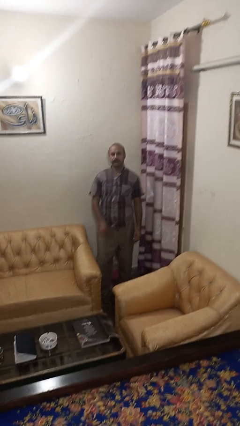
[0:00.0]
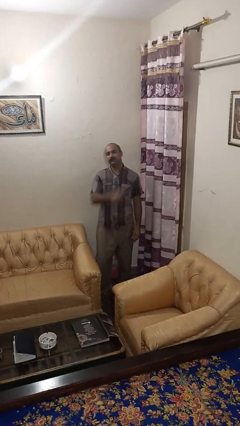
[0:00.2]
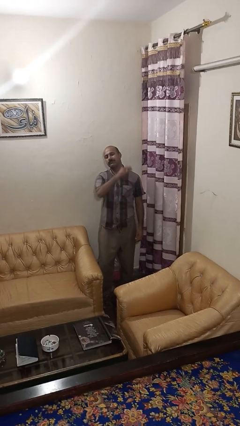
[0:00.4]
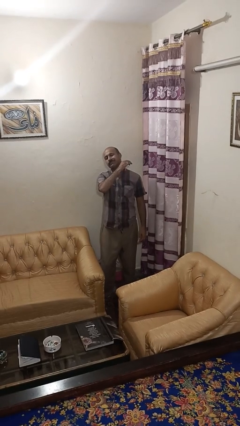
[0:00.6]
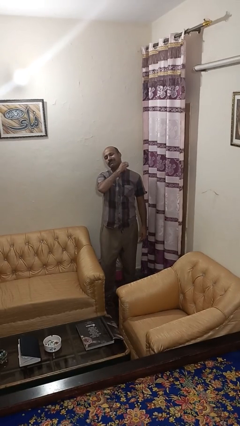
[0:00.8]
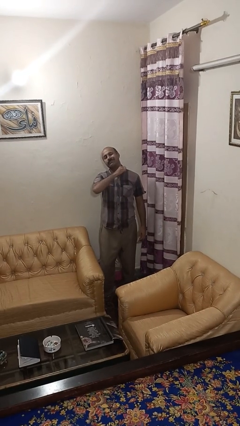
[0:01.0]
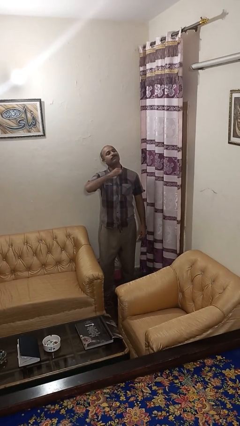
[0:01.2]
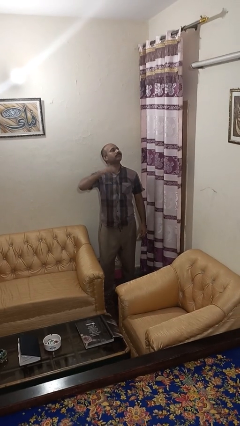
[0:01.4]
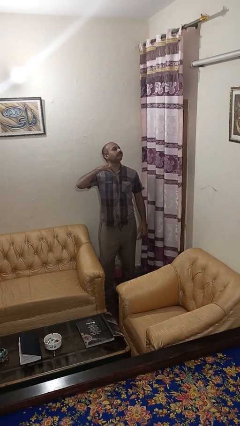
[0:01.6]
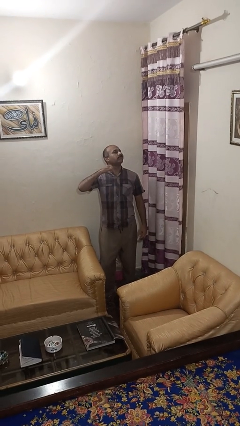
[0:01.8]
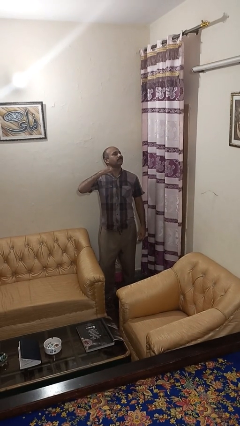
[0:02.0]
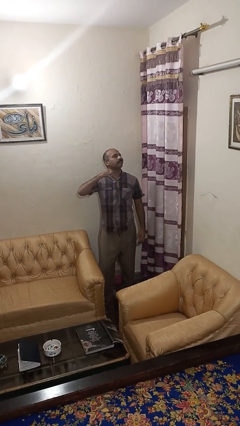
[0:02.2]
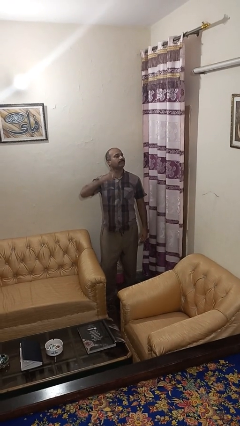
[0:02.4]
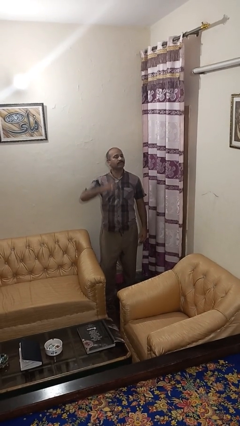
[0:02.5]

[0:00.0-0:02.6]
person gestures cut

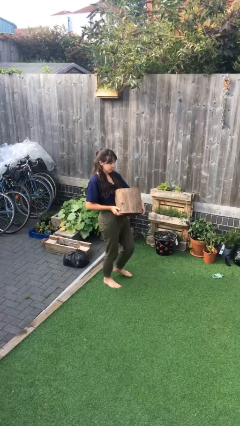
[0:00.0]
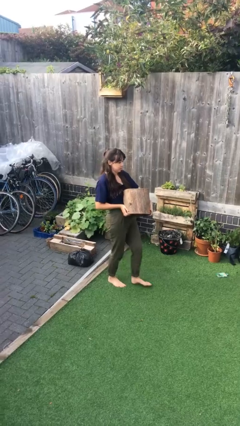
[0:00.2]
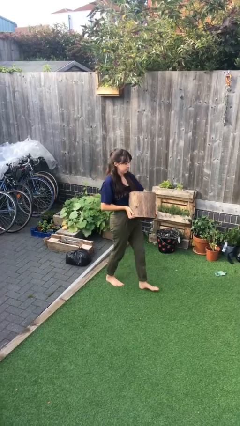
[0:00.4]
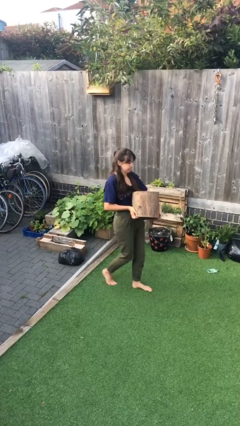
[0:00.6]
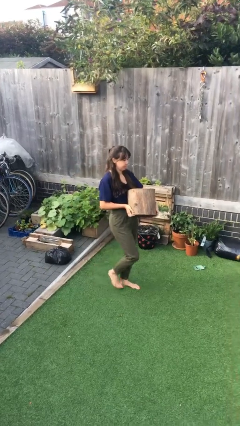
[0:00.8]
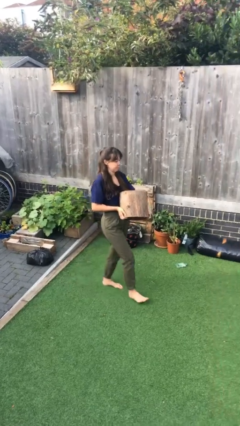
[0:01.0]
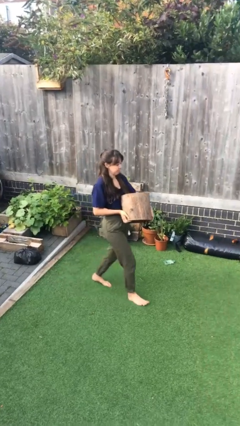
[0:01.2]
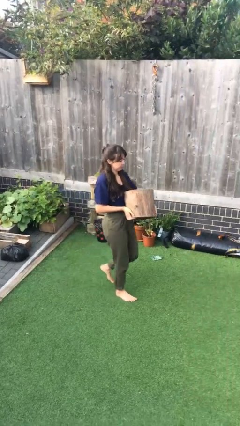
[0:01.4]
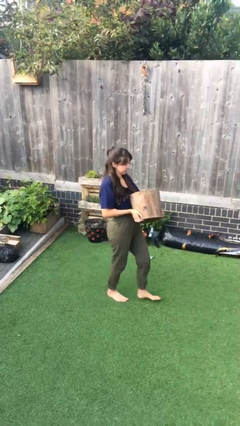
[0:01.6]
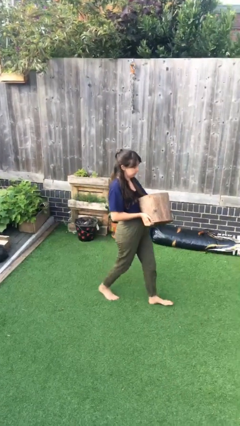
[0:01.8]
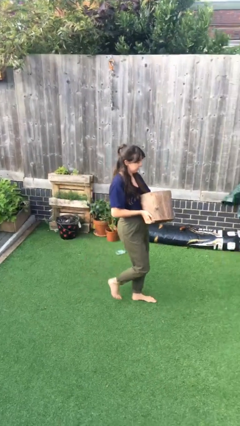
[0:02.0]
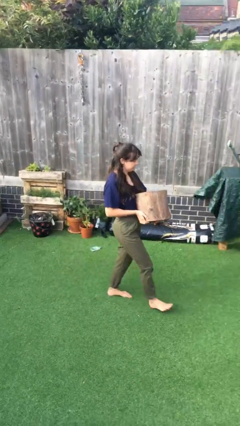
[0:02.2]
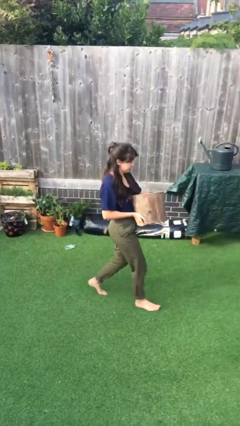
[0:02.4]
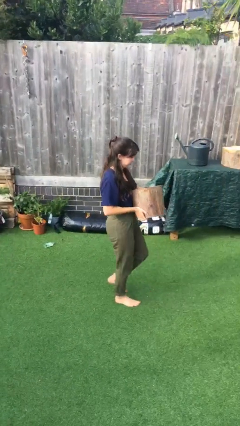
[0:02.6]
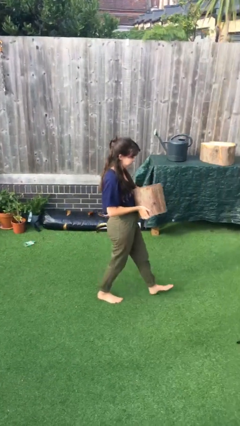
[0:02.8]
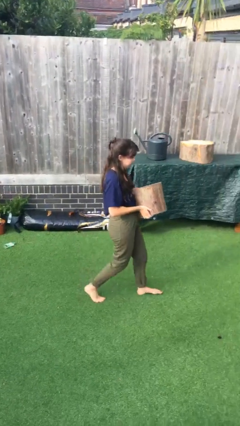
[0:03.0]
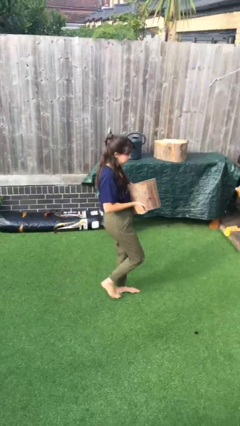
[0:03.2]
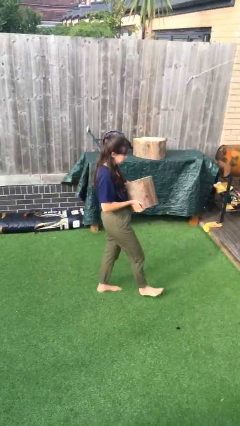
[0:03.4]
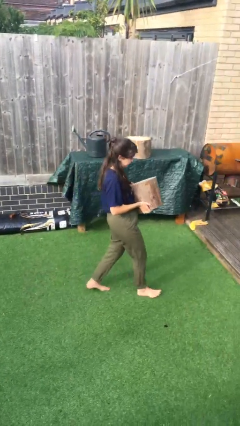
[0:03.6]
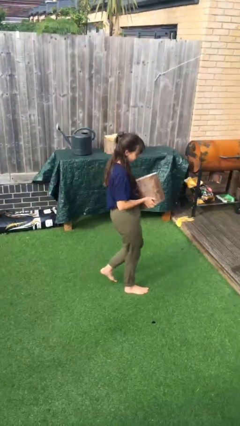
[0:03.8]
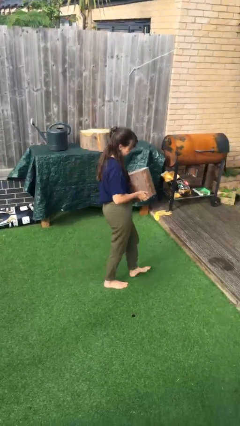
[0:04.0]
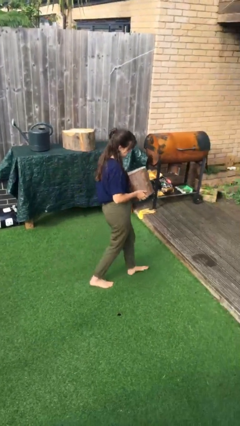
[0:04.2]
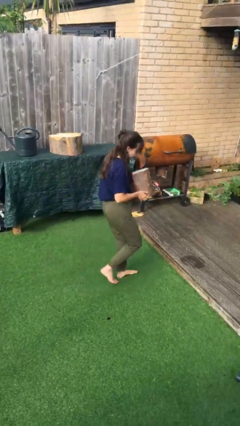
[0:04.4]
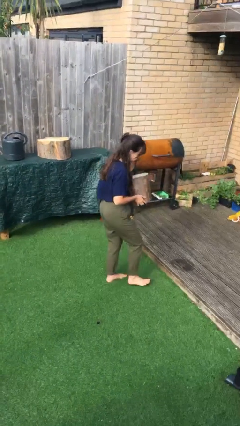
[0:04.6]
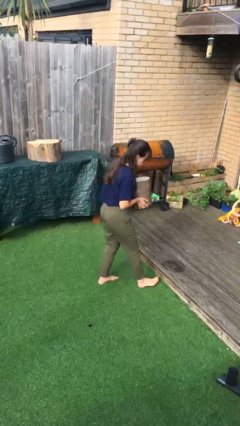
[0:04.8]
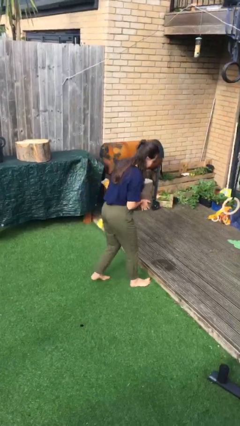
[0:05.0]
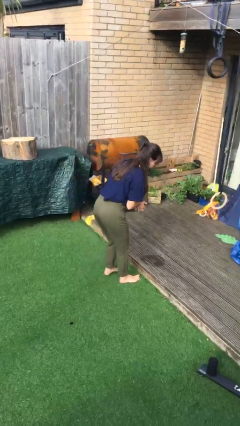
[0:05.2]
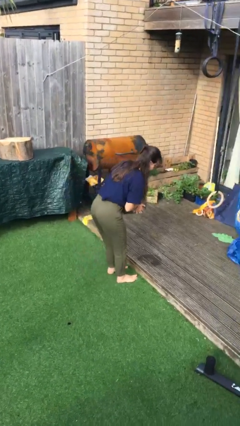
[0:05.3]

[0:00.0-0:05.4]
person carries heavy object

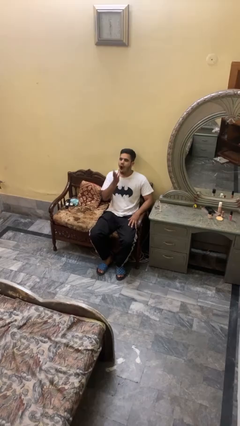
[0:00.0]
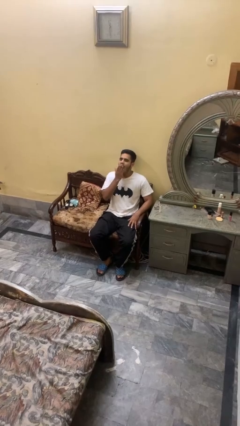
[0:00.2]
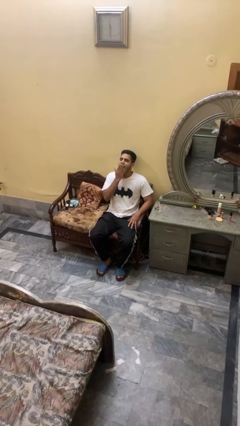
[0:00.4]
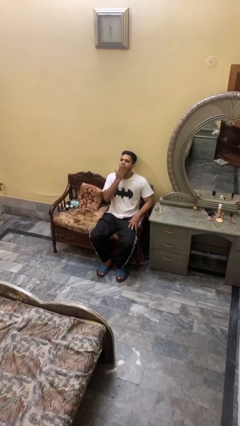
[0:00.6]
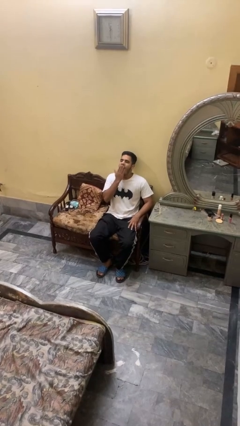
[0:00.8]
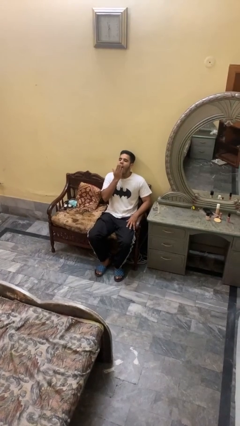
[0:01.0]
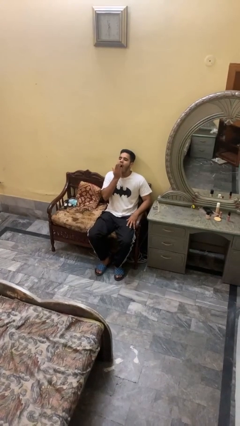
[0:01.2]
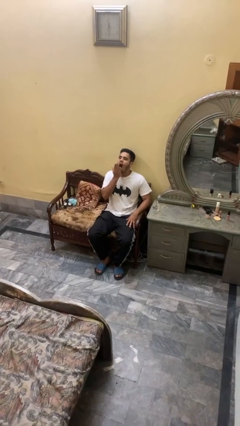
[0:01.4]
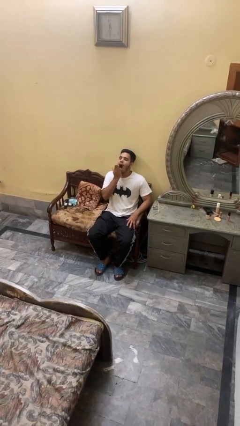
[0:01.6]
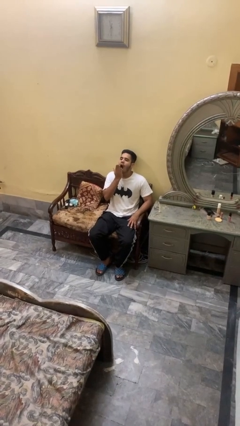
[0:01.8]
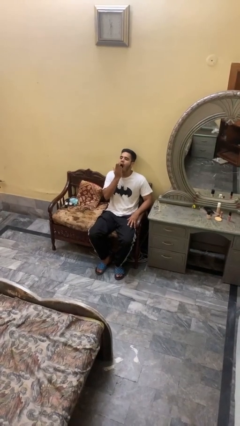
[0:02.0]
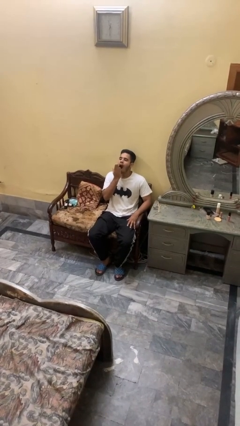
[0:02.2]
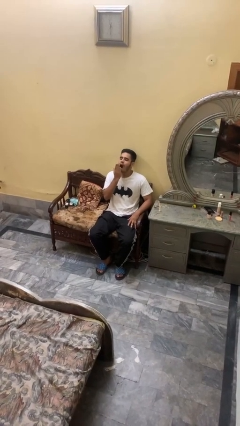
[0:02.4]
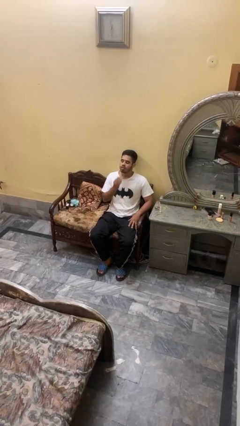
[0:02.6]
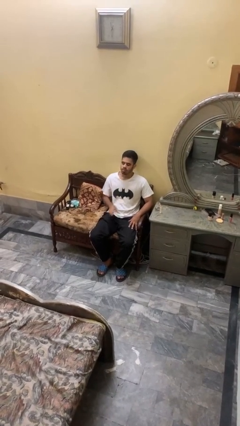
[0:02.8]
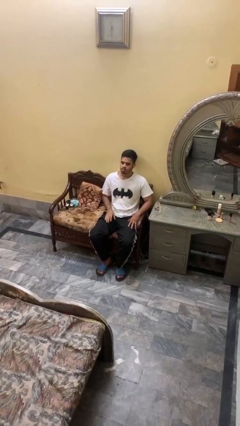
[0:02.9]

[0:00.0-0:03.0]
person yawns

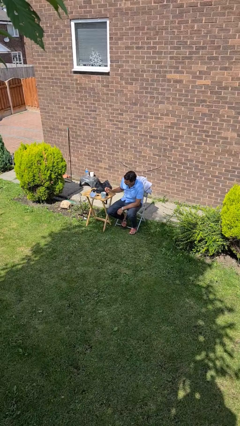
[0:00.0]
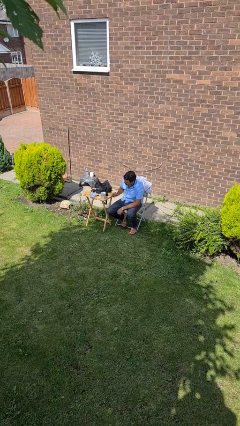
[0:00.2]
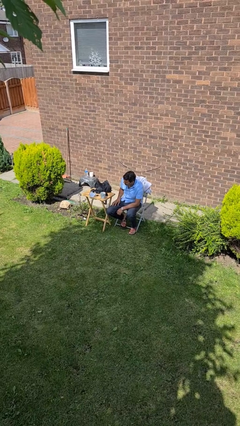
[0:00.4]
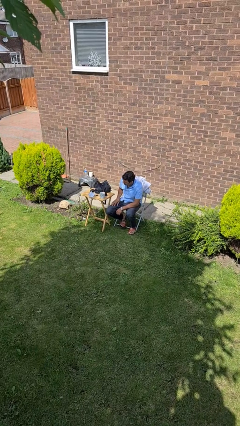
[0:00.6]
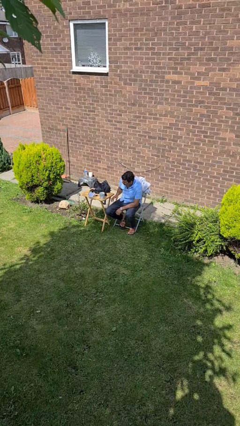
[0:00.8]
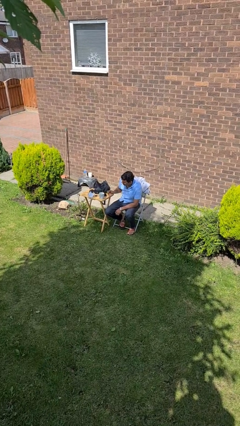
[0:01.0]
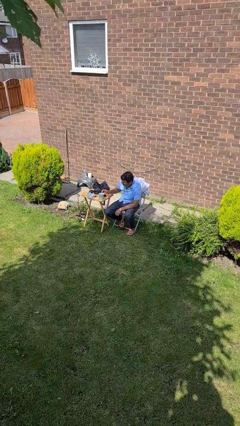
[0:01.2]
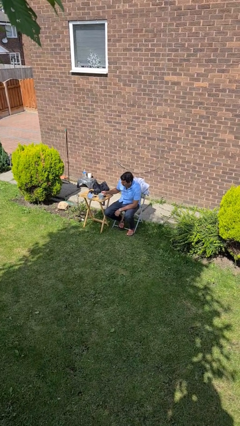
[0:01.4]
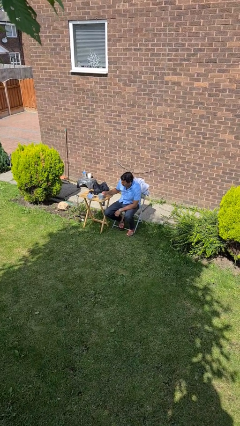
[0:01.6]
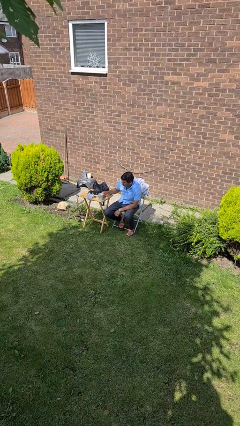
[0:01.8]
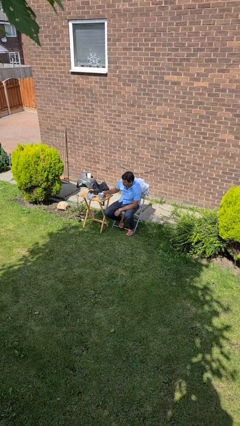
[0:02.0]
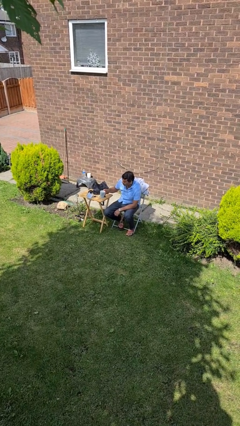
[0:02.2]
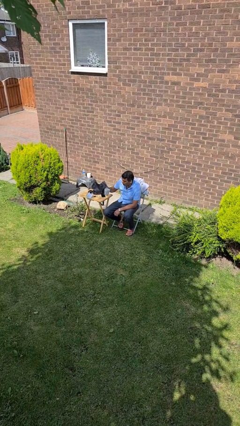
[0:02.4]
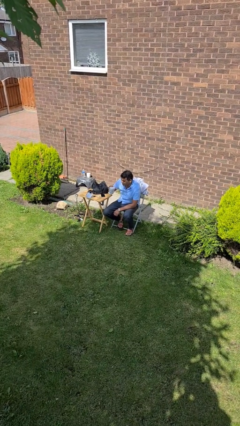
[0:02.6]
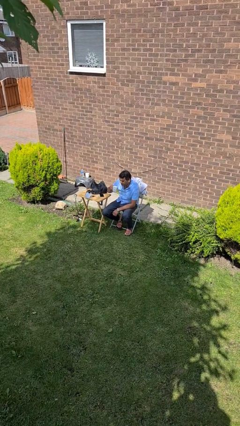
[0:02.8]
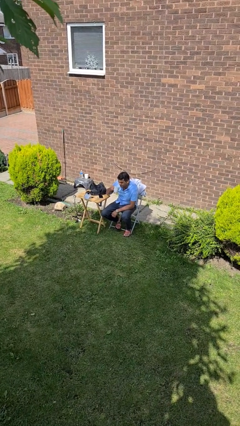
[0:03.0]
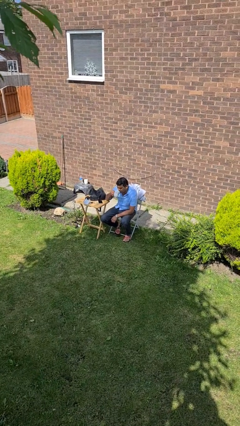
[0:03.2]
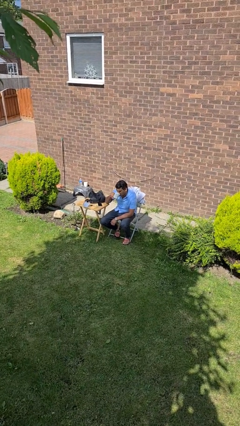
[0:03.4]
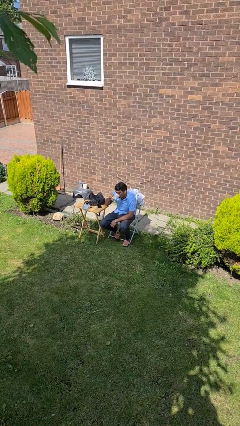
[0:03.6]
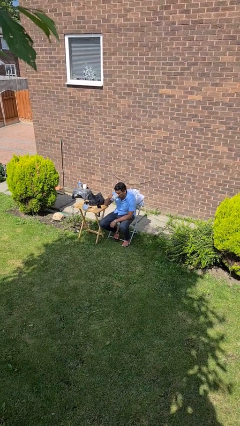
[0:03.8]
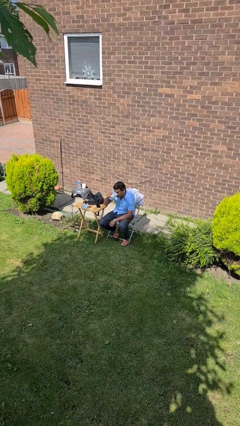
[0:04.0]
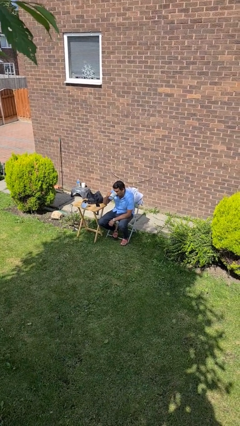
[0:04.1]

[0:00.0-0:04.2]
person picks up object from table

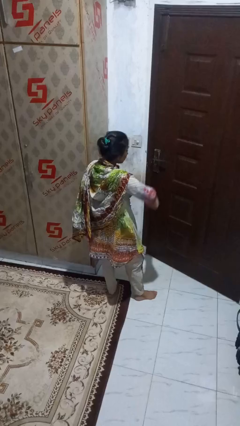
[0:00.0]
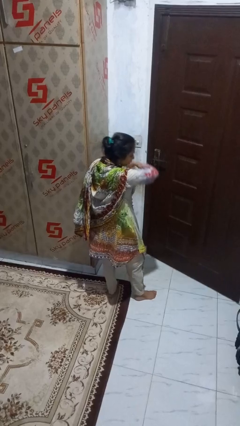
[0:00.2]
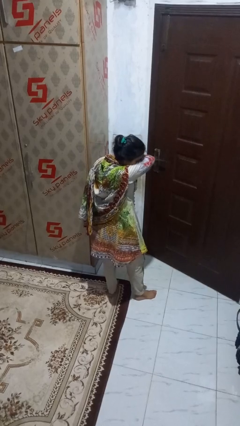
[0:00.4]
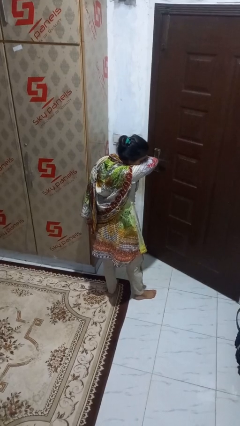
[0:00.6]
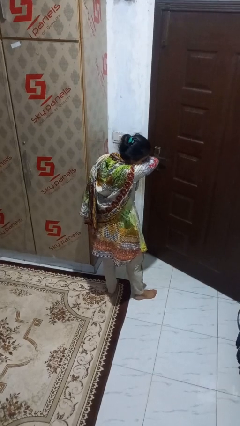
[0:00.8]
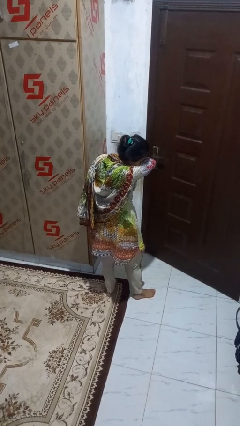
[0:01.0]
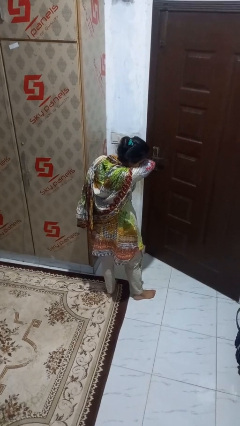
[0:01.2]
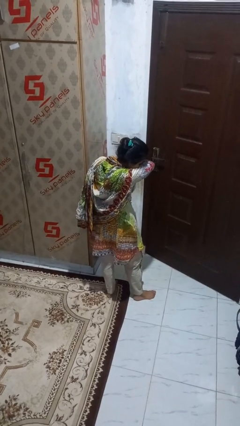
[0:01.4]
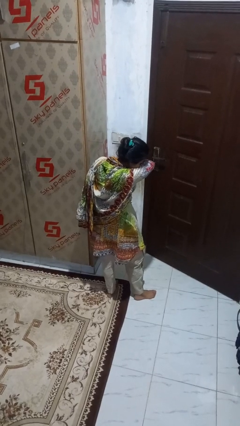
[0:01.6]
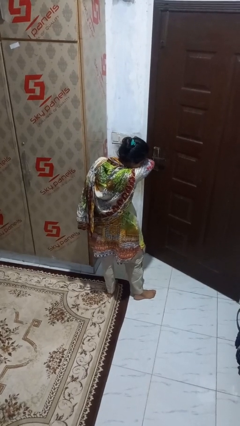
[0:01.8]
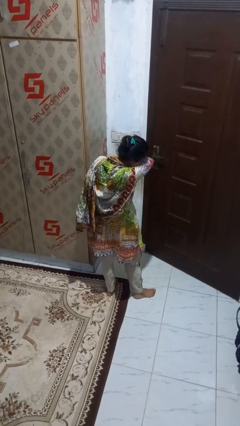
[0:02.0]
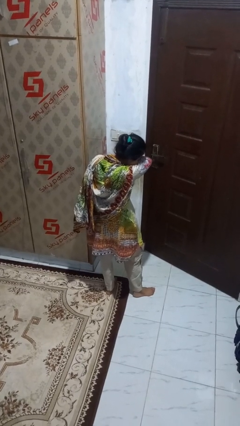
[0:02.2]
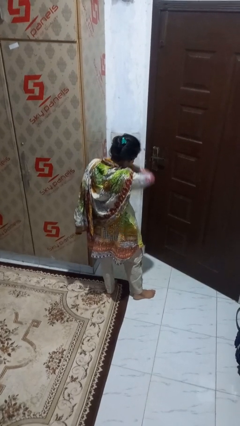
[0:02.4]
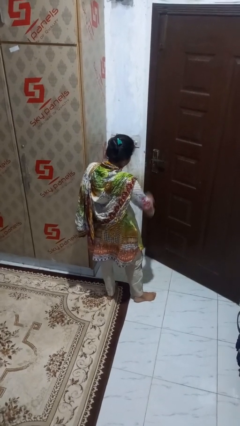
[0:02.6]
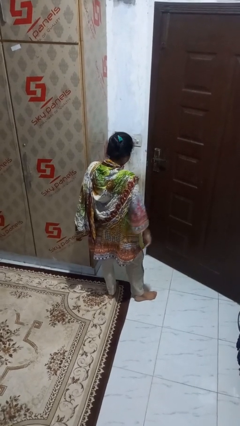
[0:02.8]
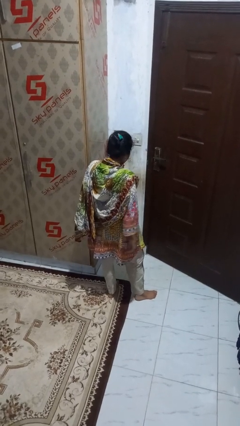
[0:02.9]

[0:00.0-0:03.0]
person sneezes into arm
